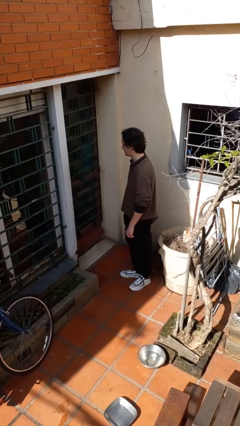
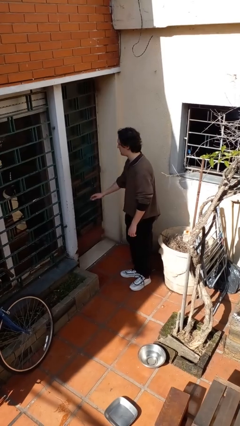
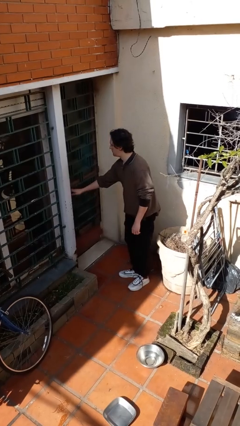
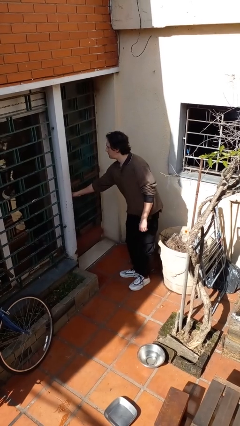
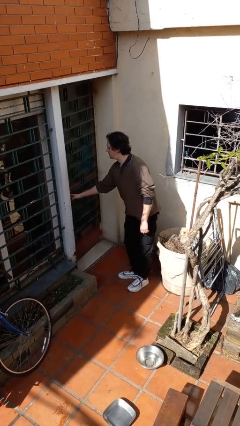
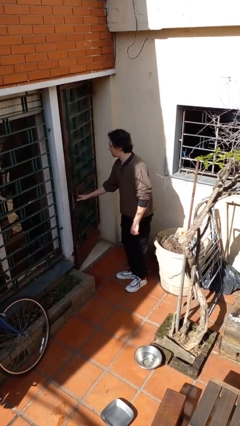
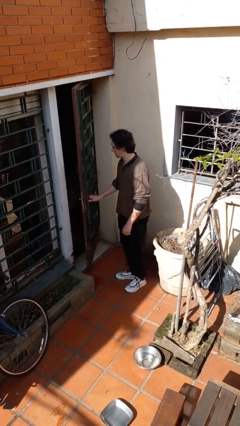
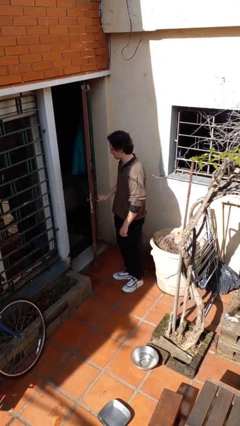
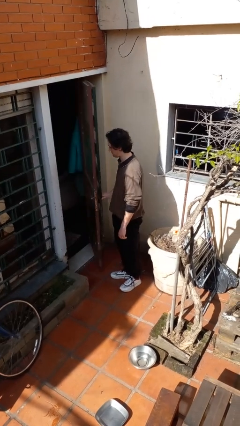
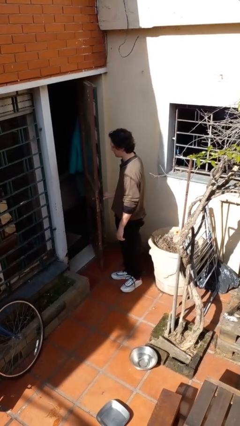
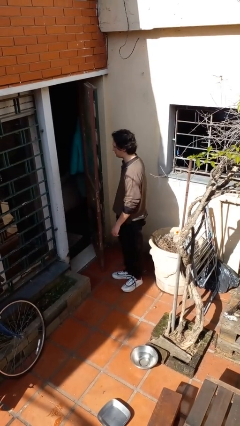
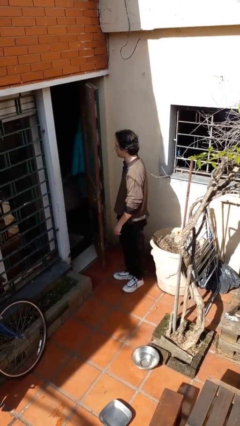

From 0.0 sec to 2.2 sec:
person opens facility door

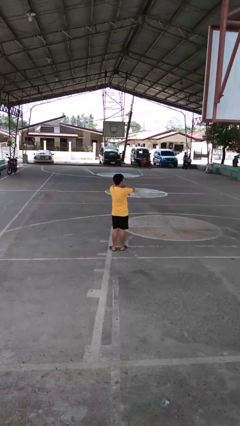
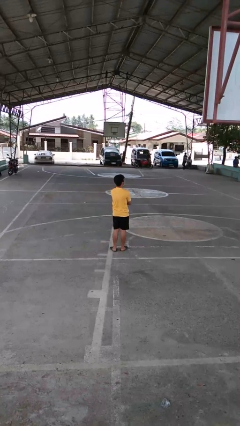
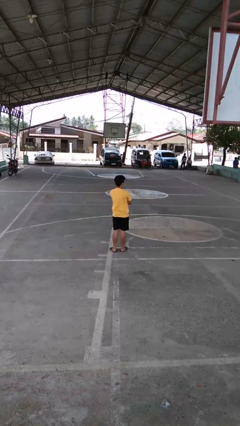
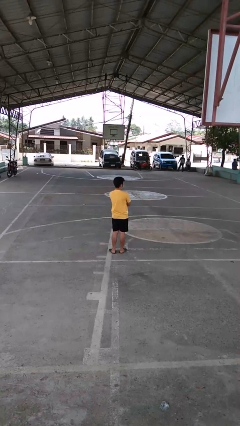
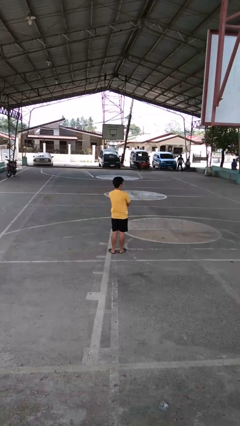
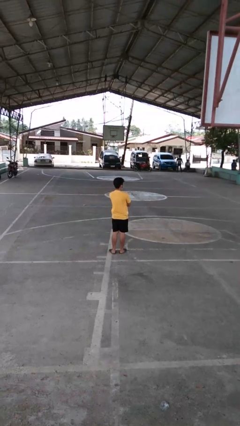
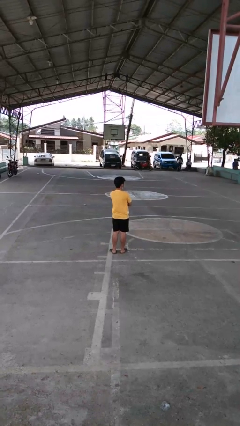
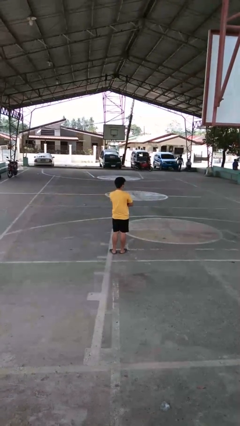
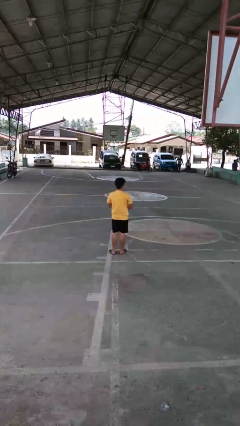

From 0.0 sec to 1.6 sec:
person crosses arms

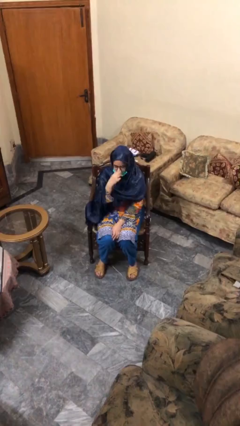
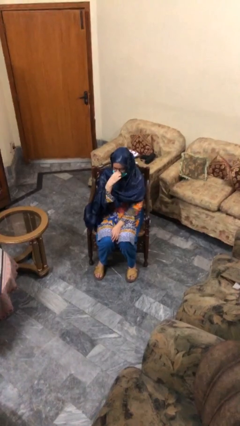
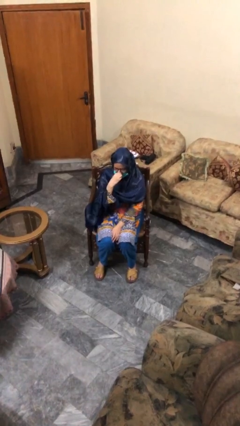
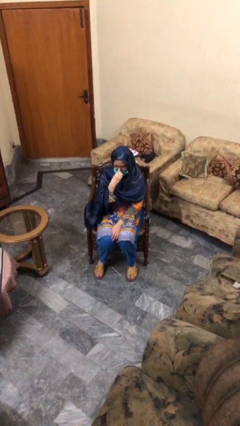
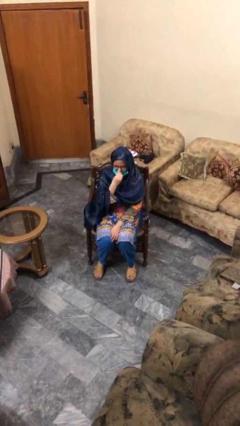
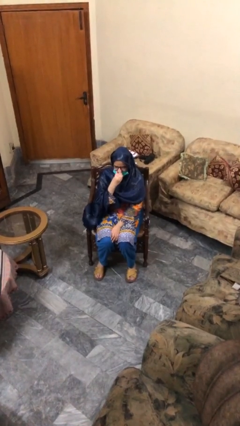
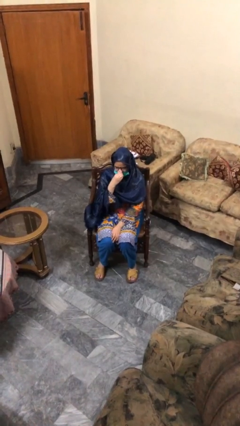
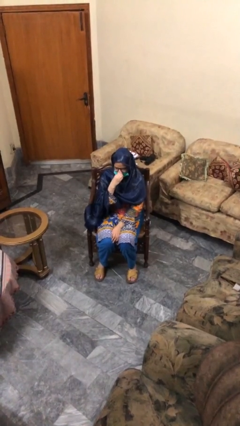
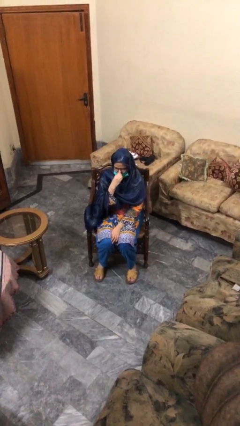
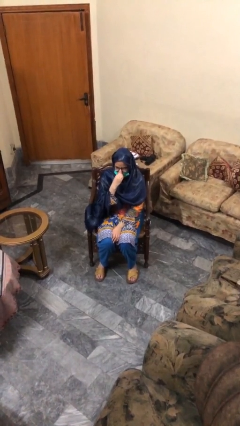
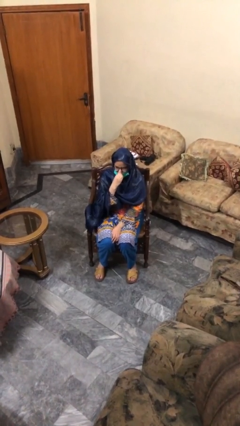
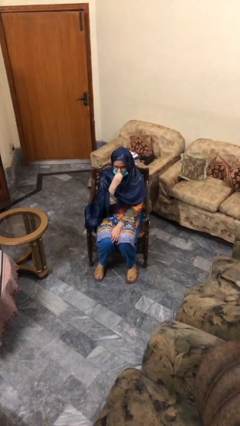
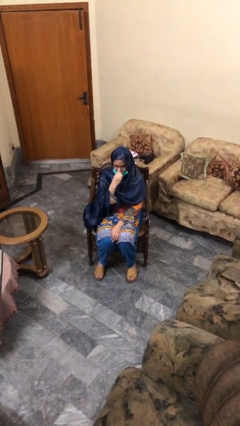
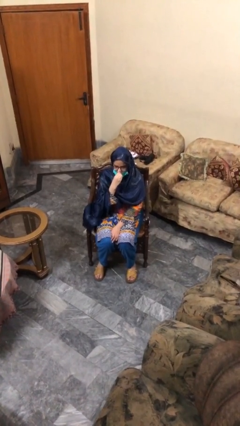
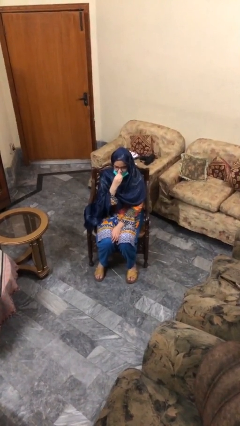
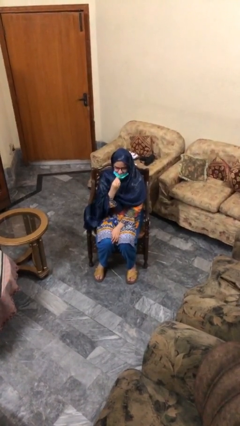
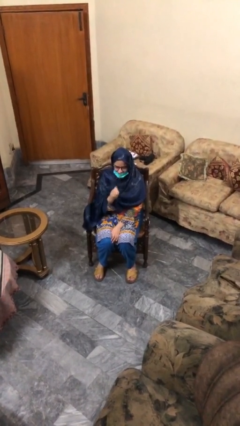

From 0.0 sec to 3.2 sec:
person blows nose

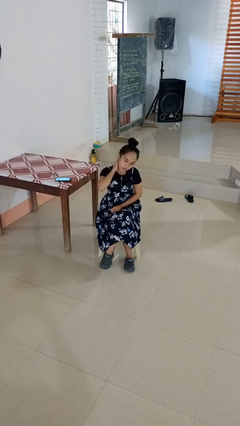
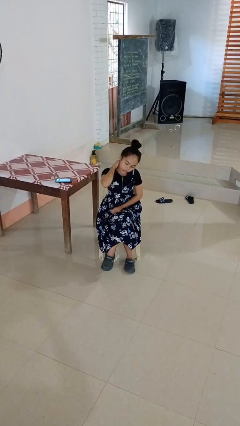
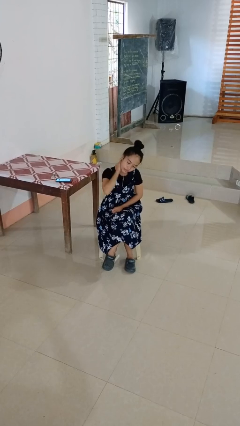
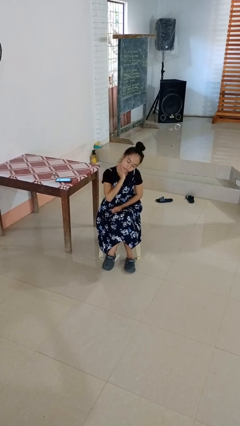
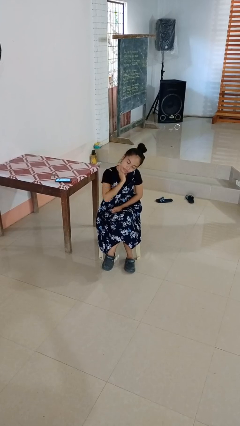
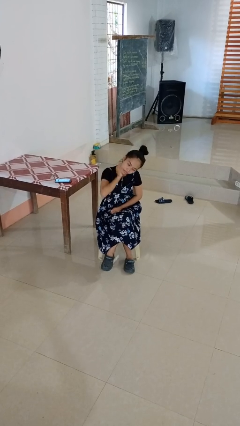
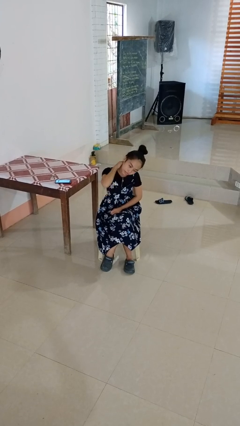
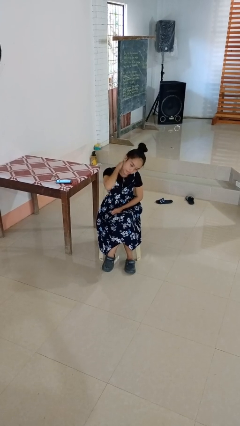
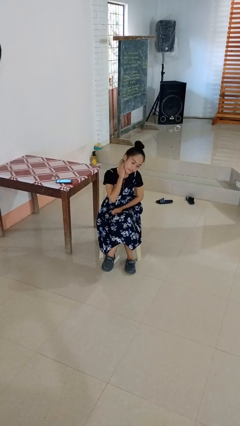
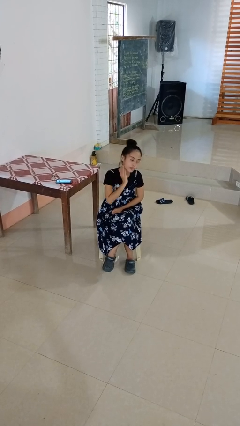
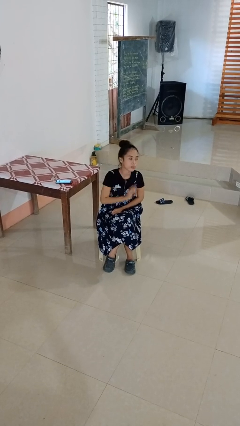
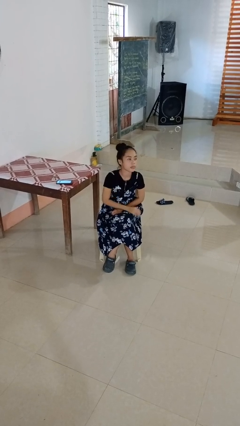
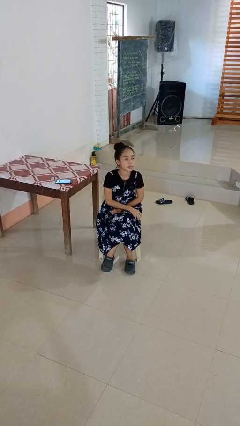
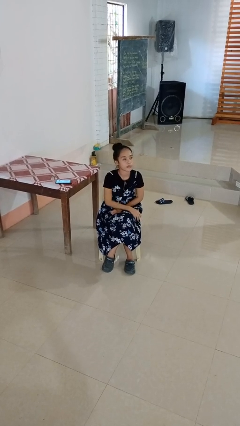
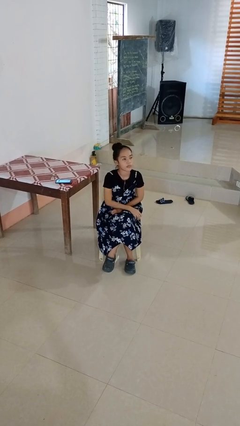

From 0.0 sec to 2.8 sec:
person rubs neck

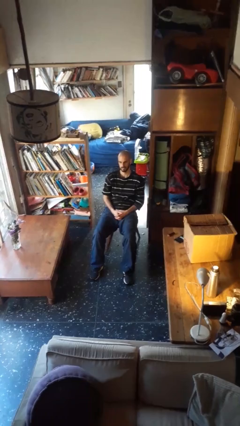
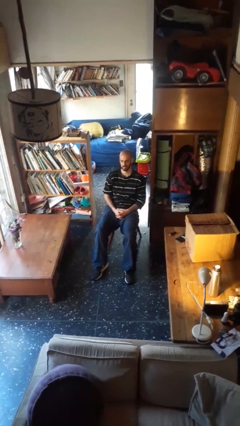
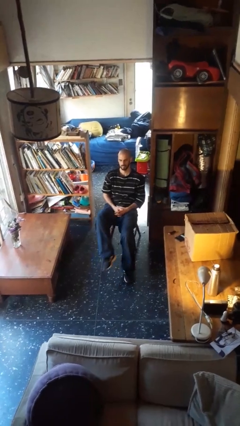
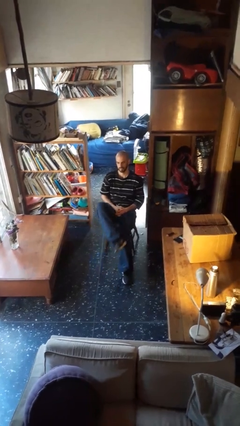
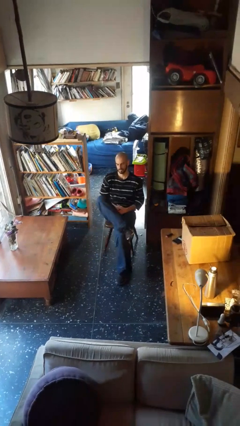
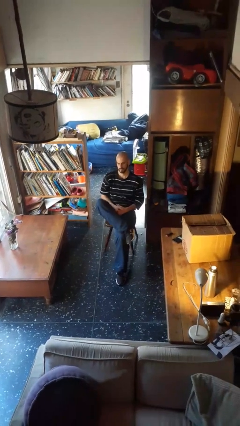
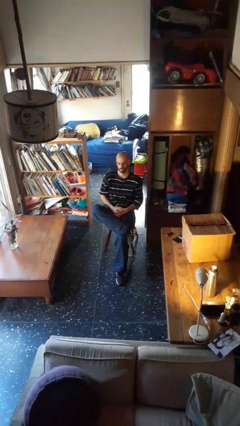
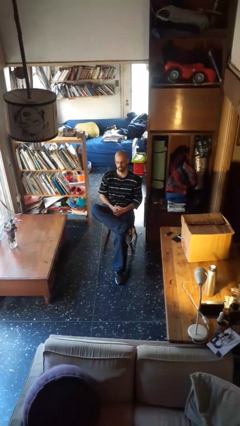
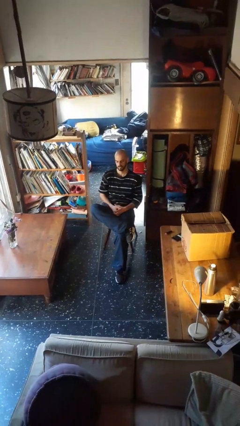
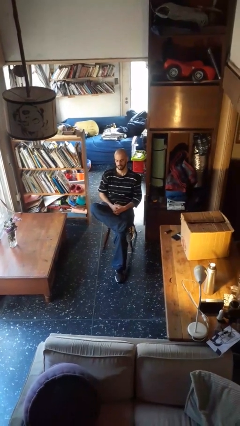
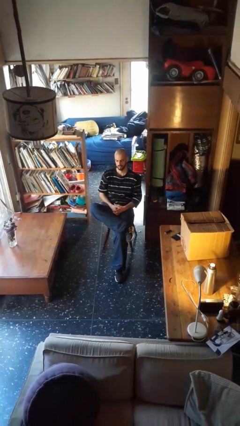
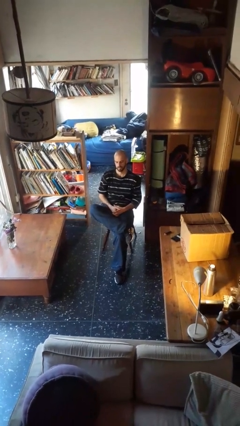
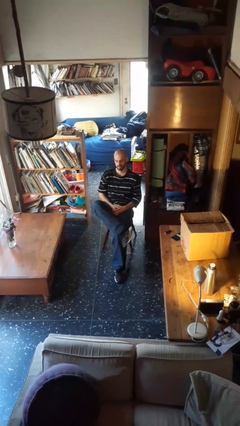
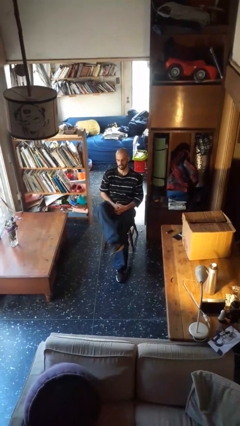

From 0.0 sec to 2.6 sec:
person crosses legs

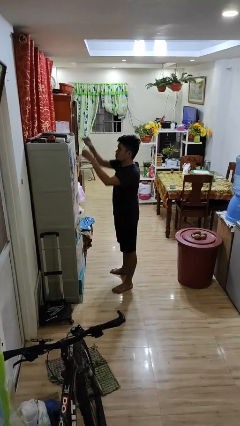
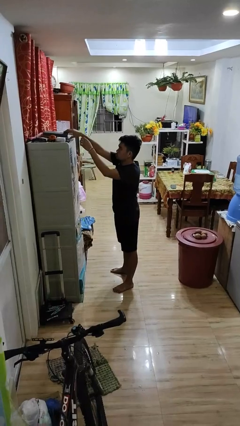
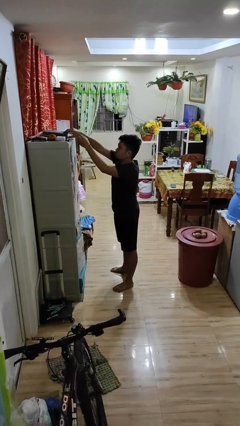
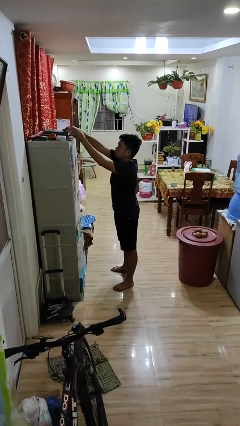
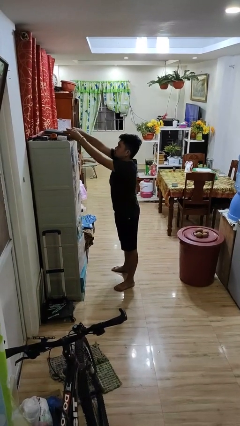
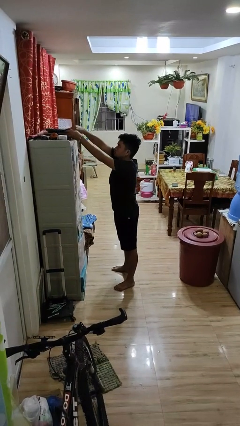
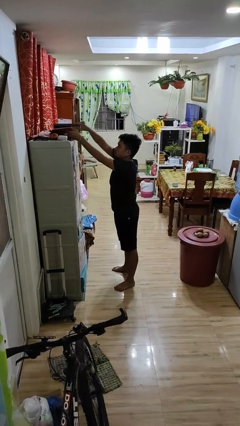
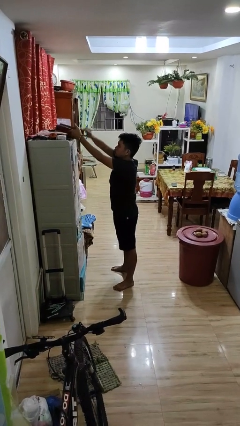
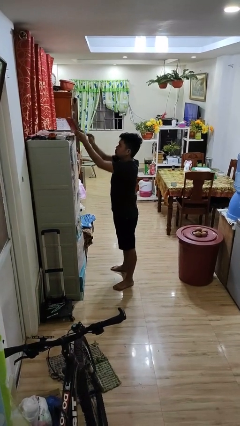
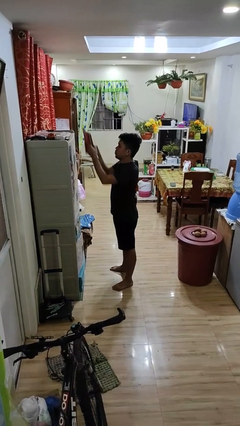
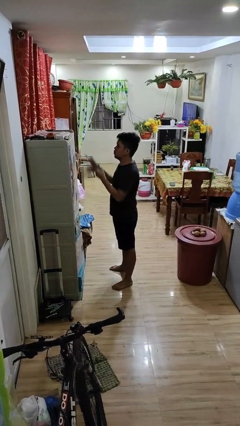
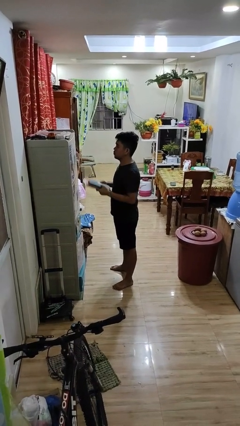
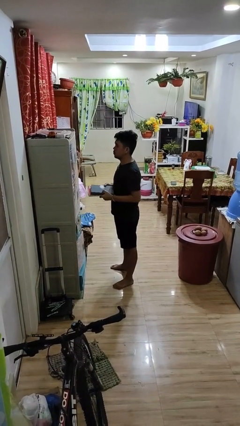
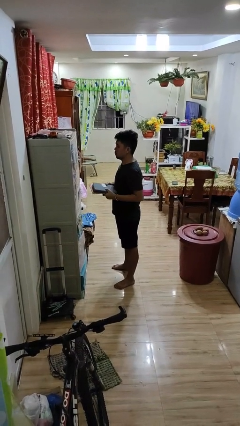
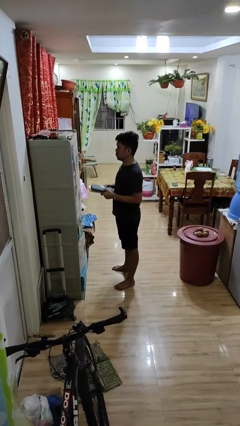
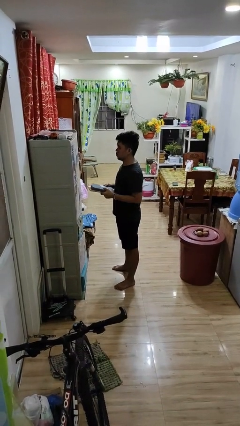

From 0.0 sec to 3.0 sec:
person picks up object from shelf

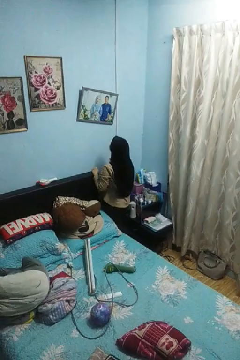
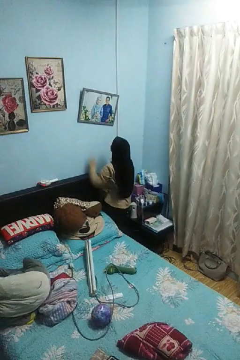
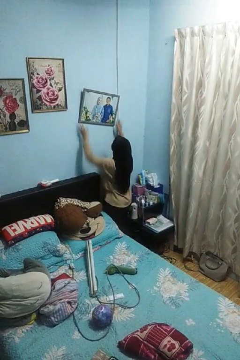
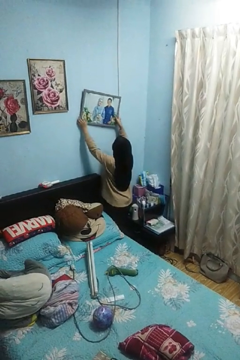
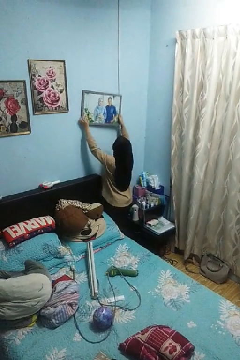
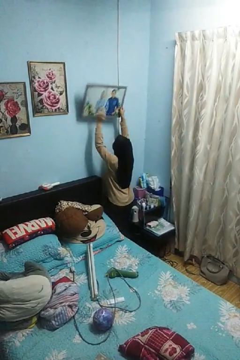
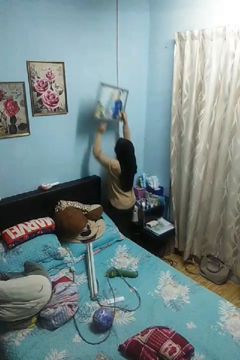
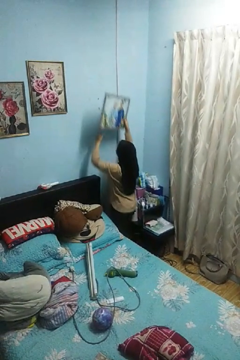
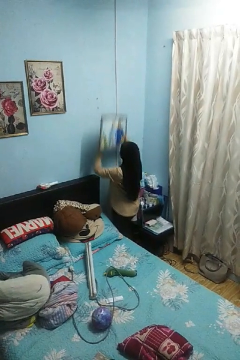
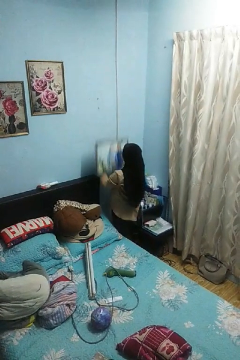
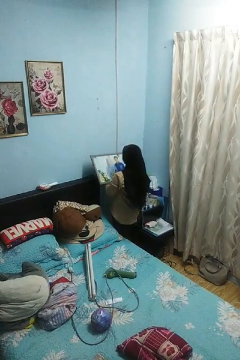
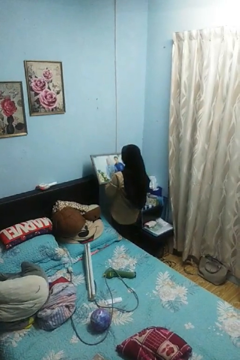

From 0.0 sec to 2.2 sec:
person takes down picture frame
